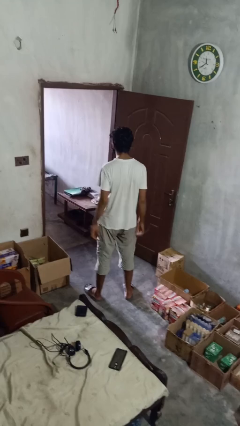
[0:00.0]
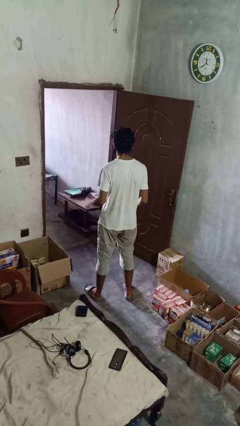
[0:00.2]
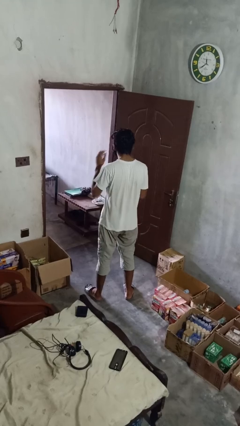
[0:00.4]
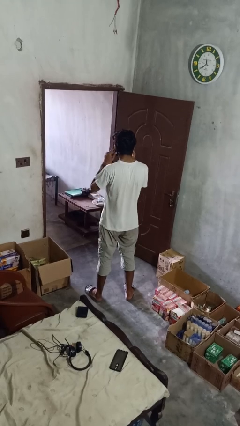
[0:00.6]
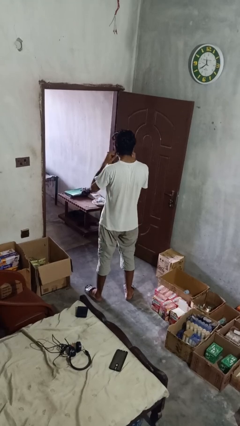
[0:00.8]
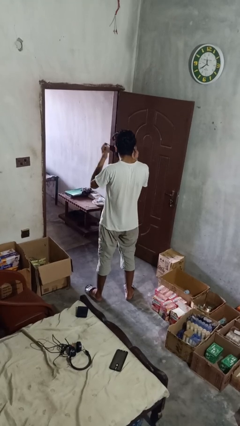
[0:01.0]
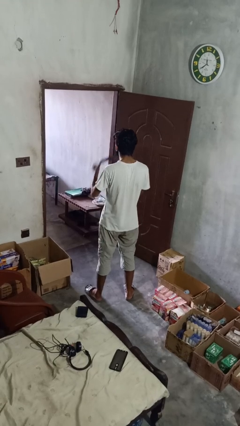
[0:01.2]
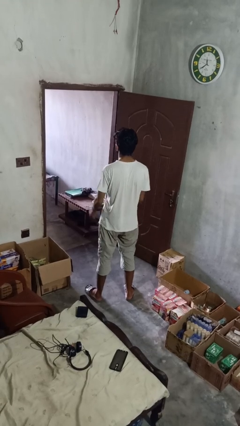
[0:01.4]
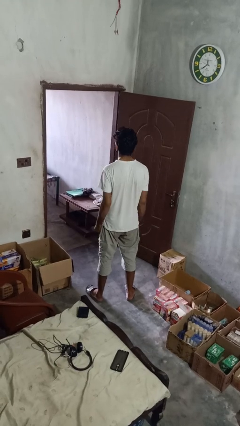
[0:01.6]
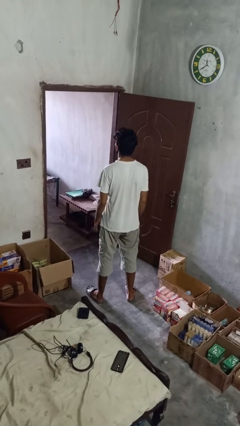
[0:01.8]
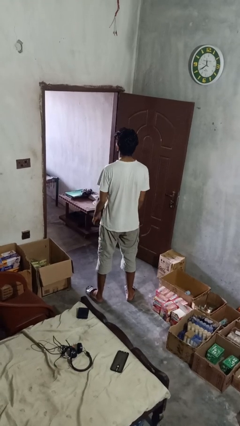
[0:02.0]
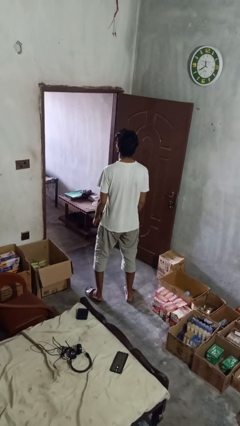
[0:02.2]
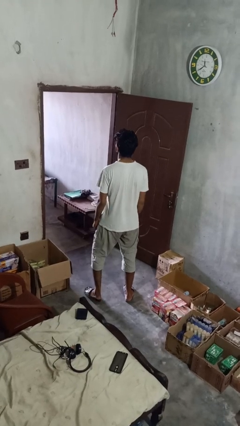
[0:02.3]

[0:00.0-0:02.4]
person takes off facemask

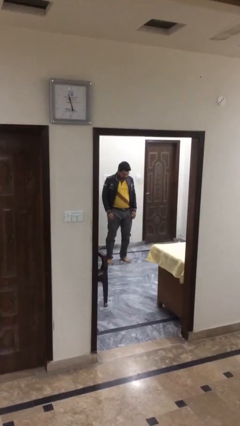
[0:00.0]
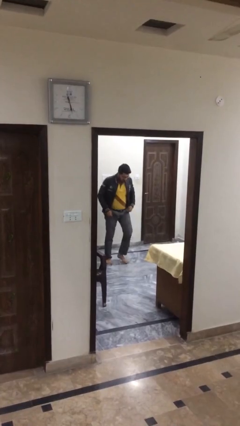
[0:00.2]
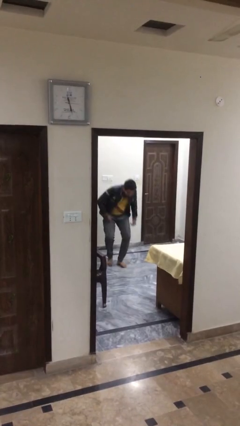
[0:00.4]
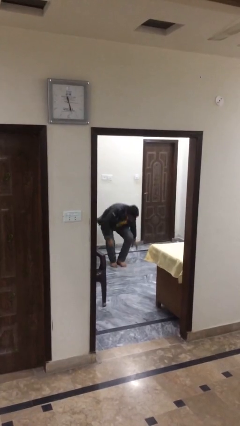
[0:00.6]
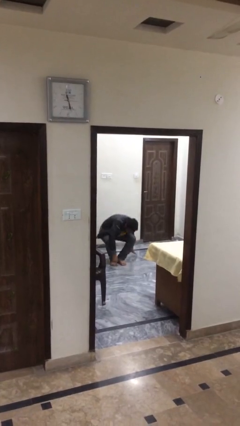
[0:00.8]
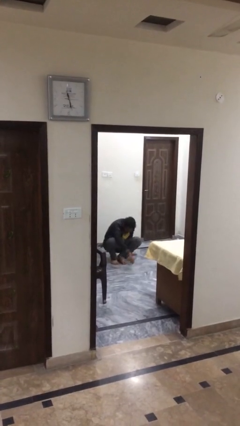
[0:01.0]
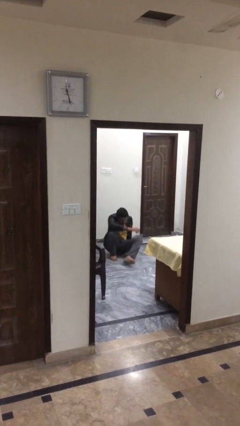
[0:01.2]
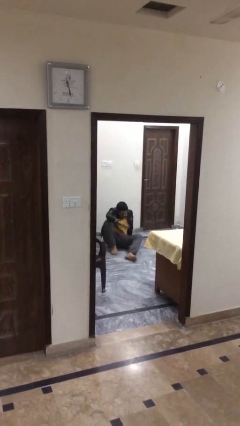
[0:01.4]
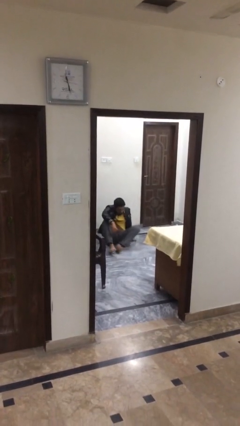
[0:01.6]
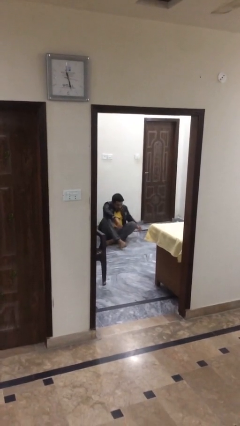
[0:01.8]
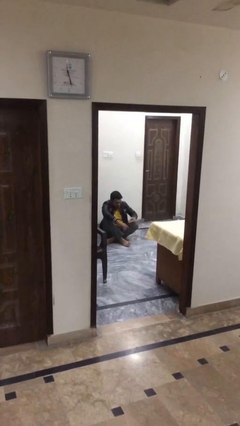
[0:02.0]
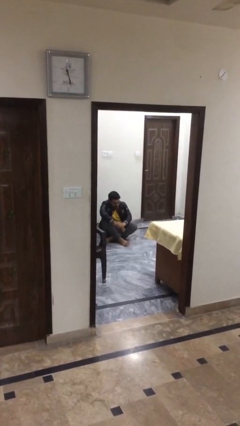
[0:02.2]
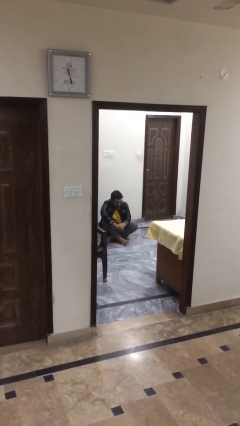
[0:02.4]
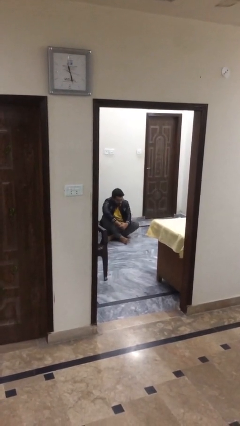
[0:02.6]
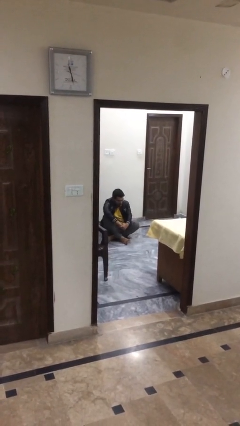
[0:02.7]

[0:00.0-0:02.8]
person sits down

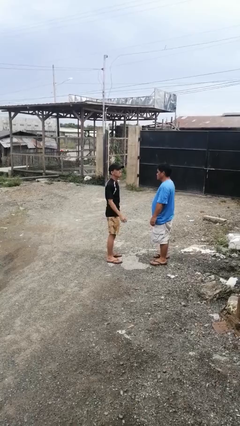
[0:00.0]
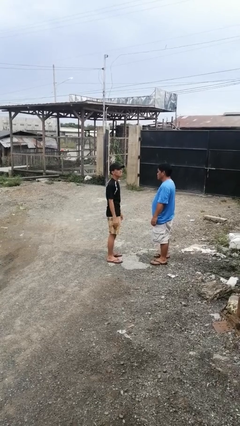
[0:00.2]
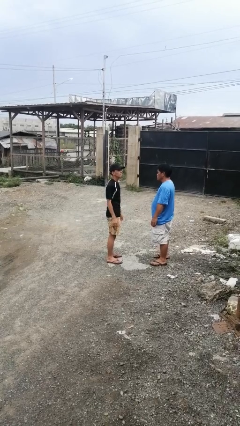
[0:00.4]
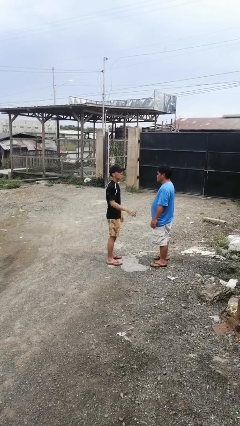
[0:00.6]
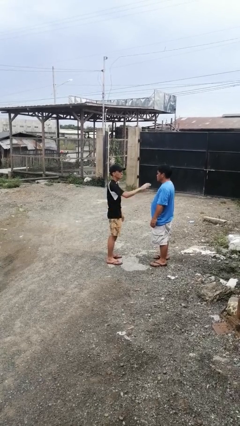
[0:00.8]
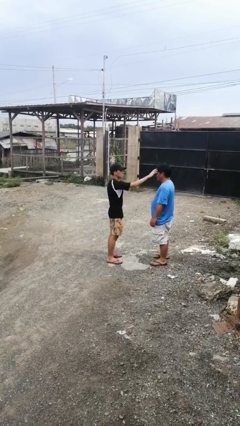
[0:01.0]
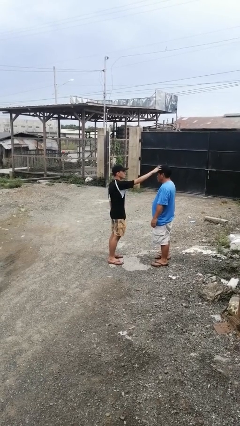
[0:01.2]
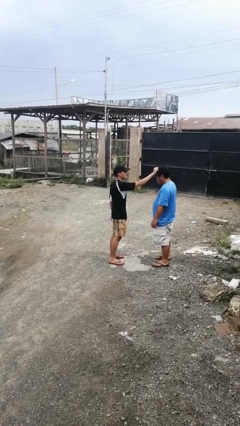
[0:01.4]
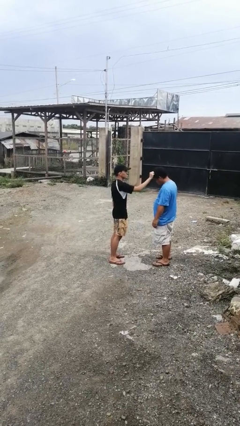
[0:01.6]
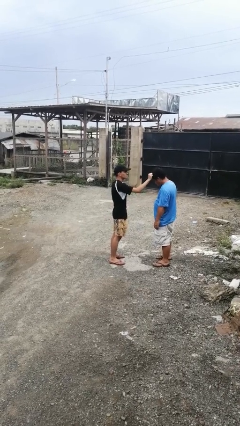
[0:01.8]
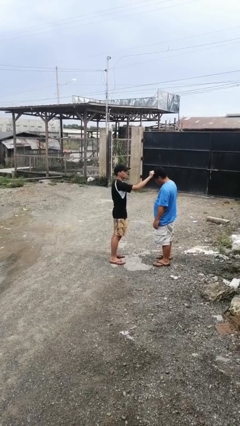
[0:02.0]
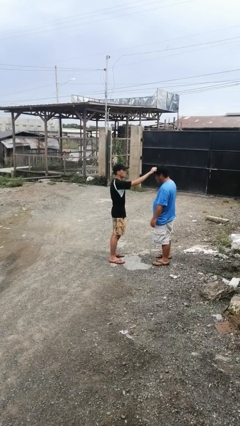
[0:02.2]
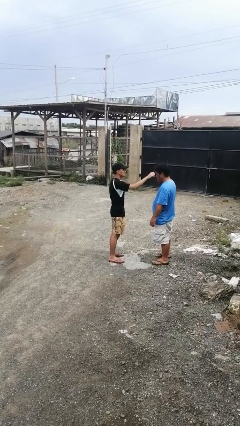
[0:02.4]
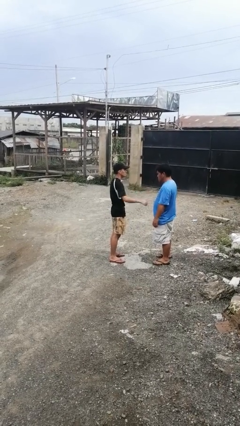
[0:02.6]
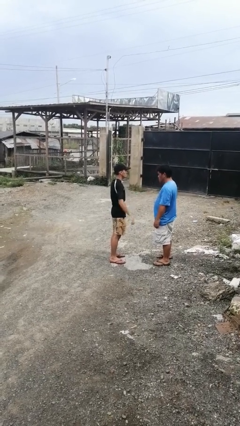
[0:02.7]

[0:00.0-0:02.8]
person grabs person by hair

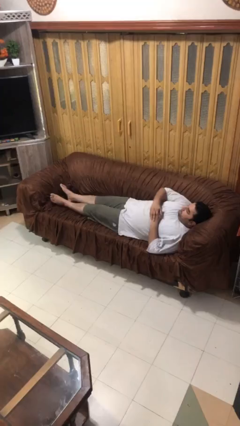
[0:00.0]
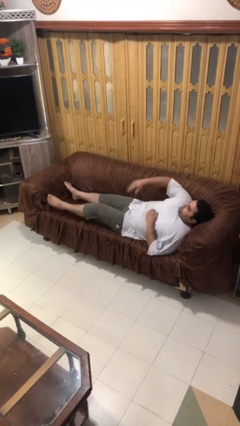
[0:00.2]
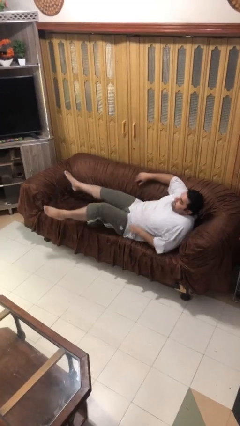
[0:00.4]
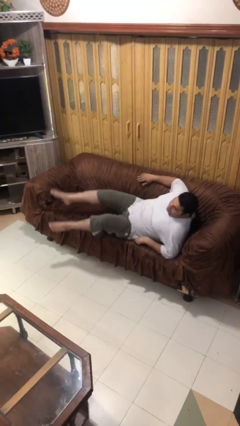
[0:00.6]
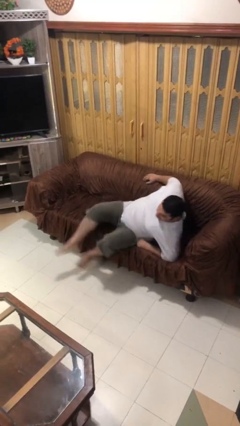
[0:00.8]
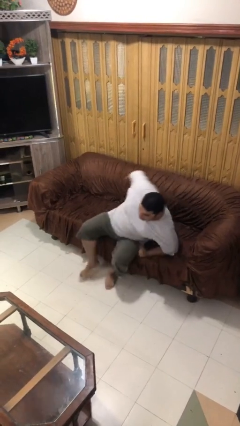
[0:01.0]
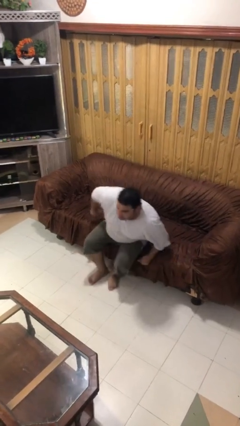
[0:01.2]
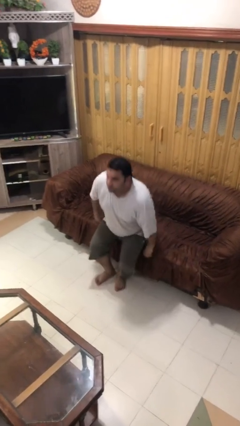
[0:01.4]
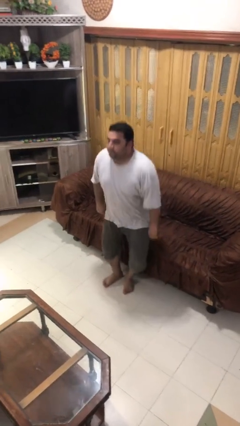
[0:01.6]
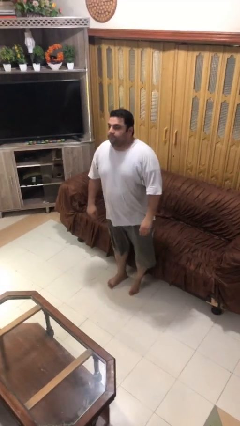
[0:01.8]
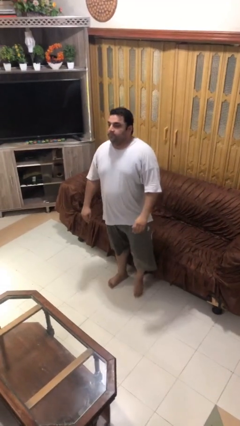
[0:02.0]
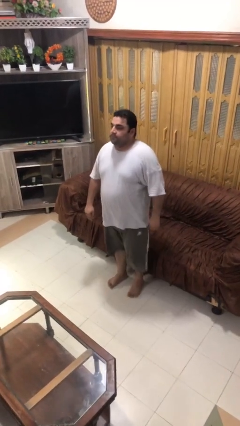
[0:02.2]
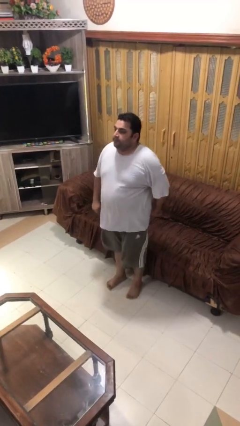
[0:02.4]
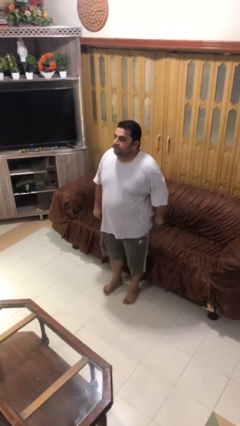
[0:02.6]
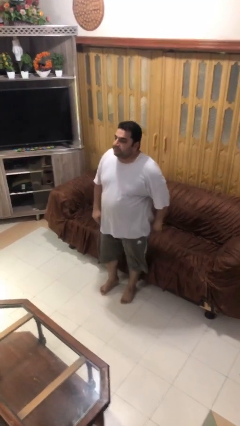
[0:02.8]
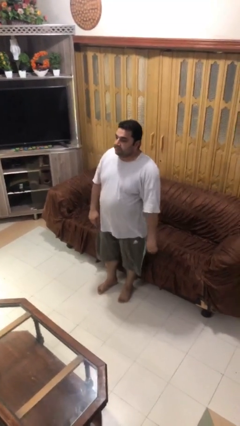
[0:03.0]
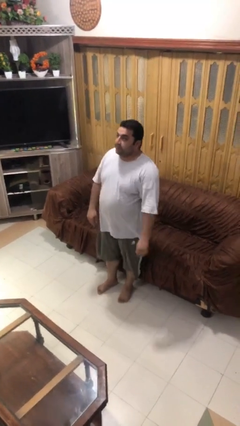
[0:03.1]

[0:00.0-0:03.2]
person stands up

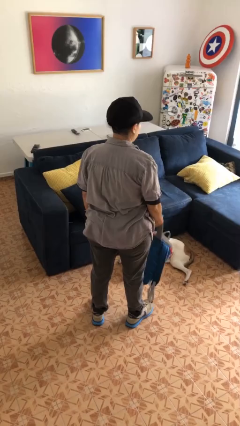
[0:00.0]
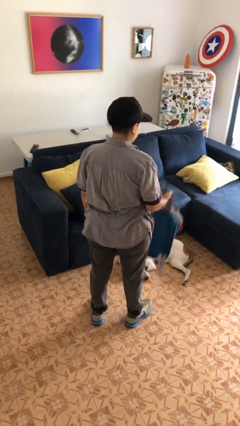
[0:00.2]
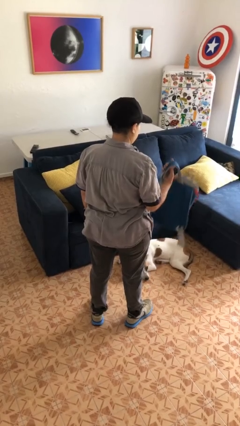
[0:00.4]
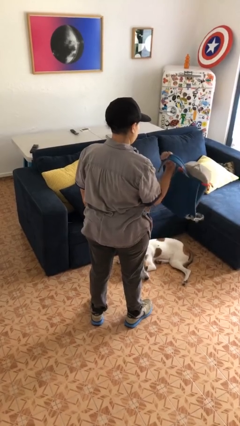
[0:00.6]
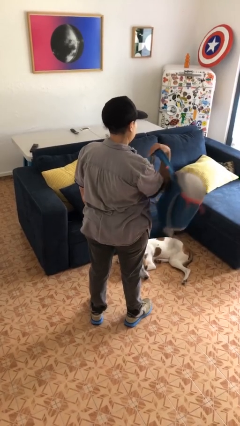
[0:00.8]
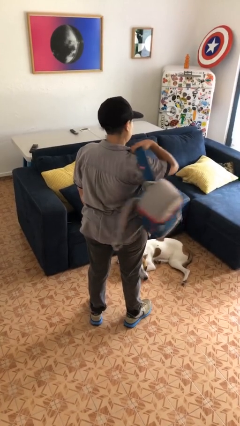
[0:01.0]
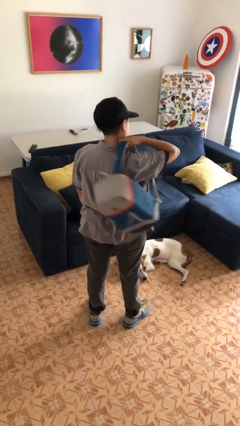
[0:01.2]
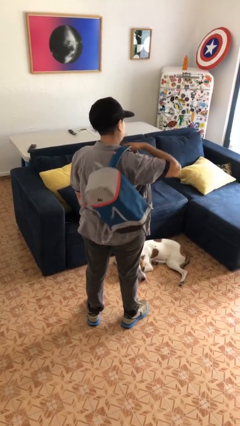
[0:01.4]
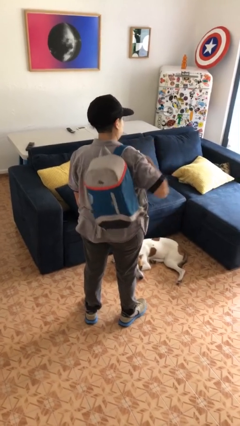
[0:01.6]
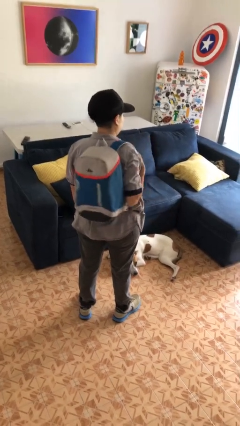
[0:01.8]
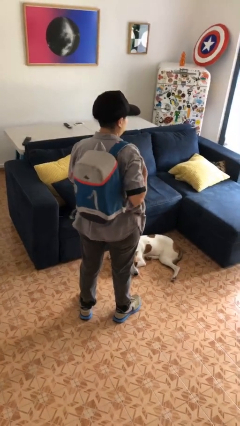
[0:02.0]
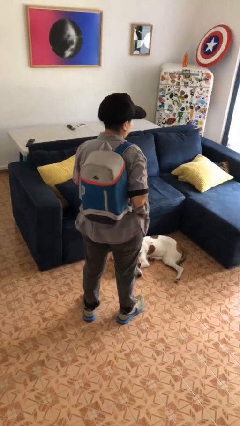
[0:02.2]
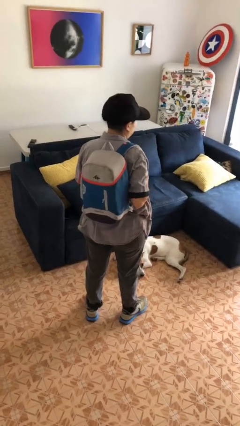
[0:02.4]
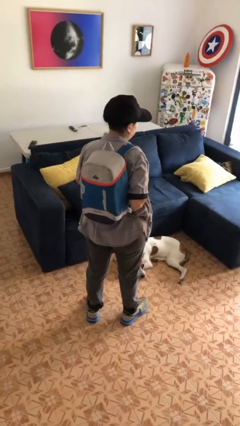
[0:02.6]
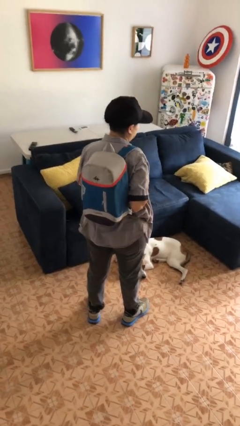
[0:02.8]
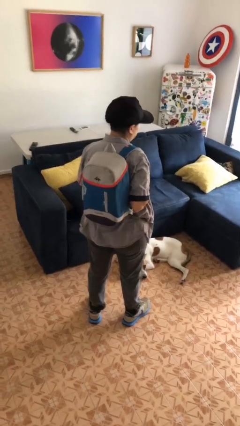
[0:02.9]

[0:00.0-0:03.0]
person puts on backpack

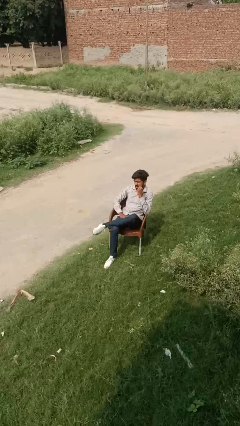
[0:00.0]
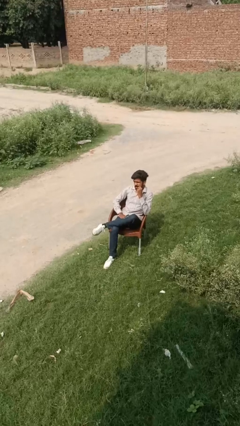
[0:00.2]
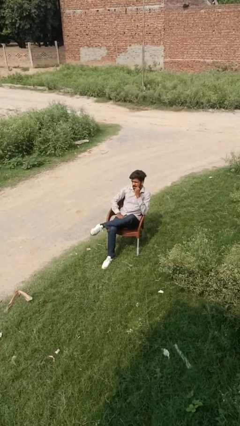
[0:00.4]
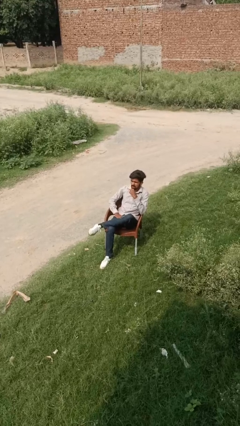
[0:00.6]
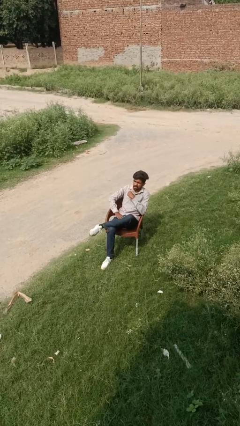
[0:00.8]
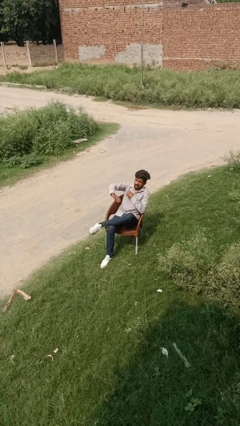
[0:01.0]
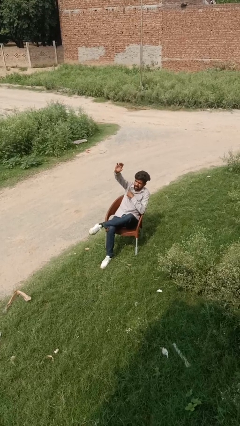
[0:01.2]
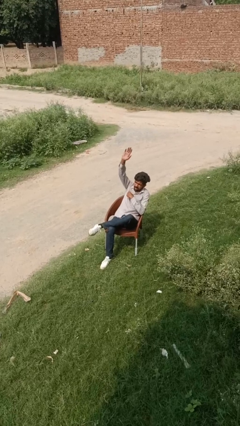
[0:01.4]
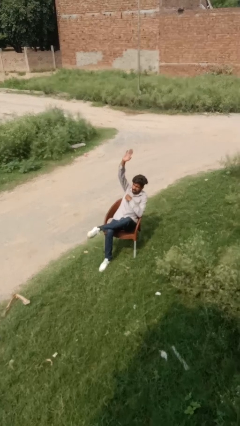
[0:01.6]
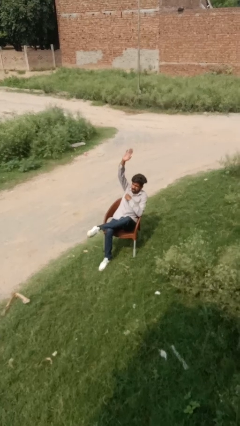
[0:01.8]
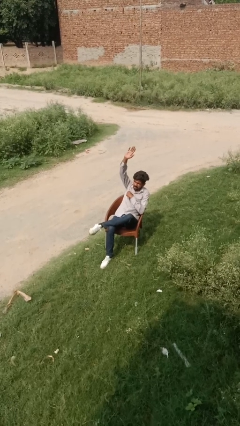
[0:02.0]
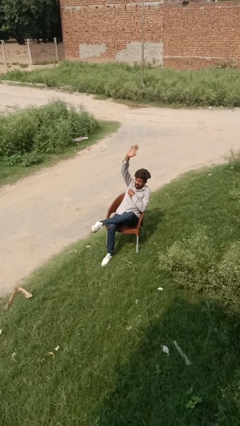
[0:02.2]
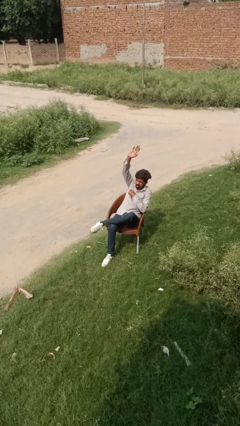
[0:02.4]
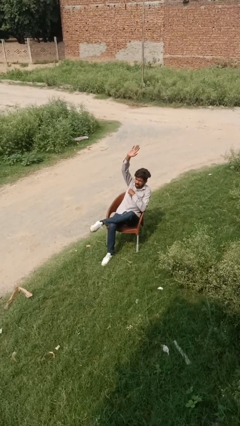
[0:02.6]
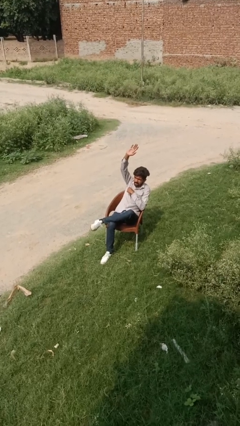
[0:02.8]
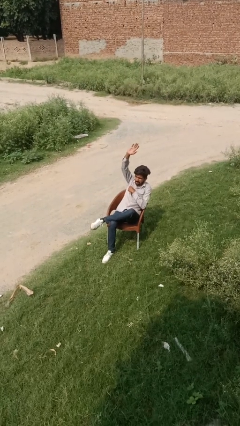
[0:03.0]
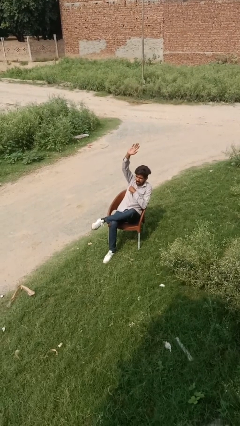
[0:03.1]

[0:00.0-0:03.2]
person gestures raise hand

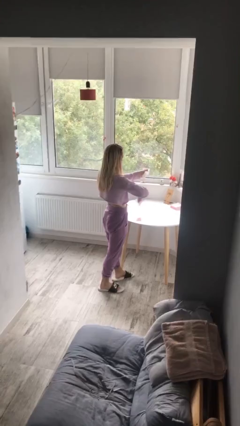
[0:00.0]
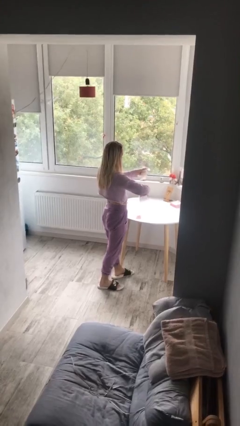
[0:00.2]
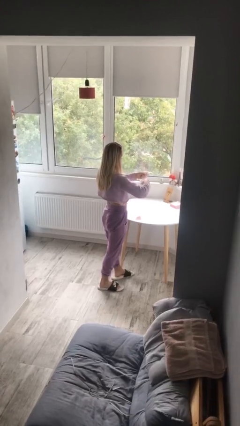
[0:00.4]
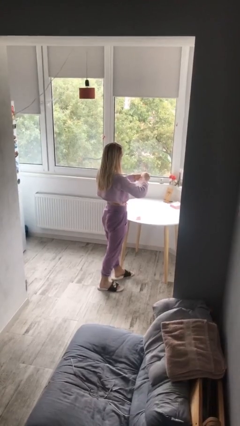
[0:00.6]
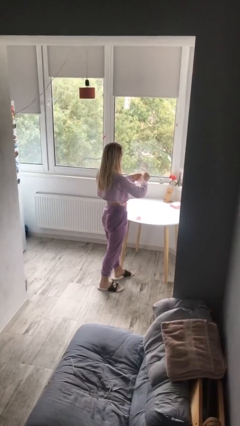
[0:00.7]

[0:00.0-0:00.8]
person tears paper
